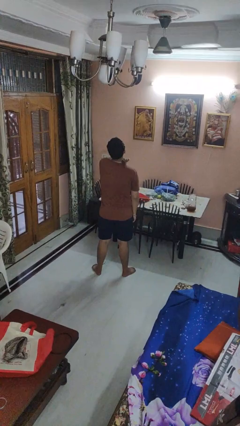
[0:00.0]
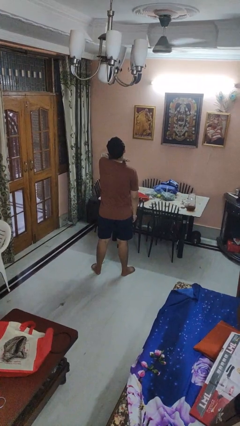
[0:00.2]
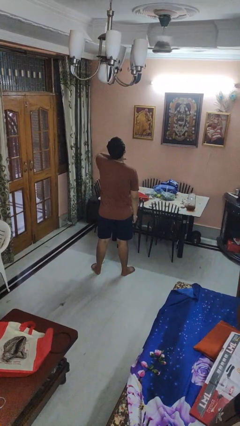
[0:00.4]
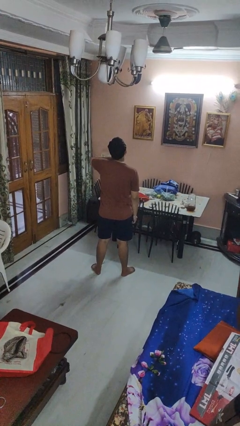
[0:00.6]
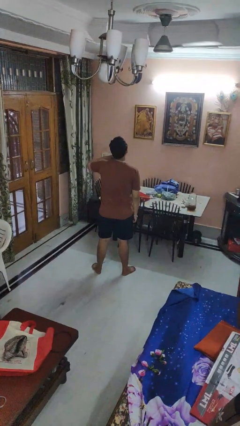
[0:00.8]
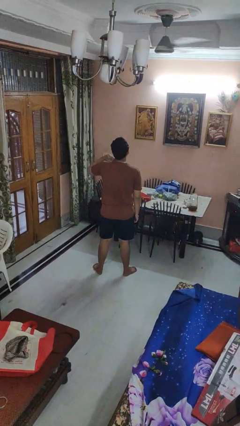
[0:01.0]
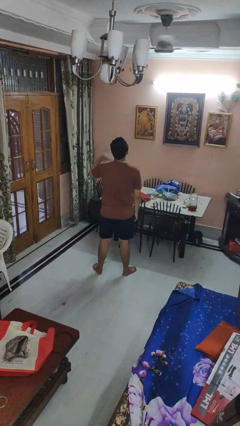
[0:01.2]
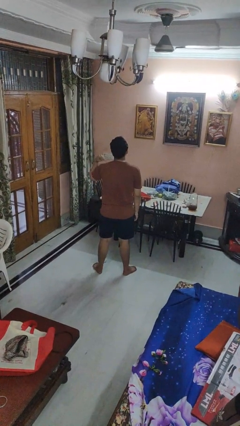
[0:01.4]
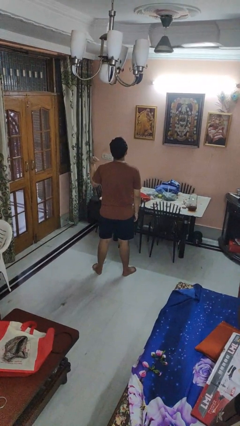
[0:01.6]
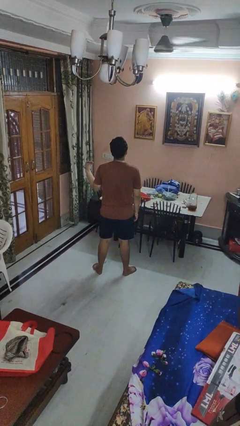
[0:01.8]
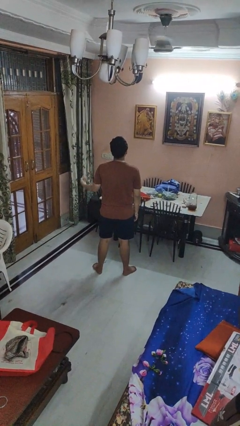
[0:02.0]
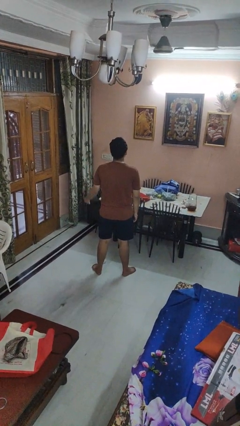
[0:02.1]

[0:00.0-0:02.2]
person gestures cut

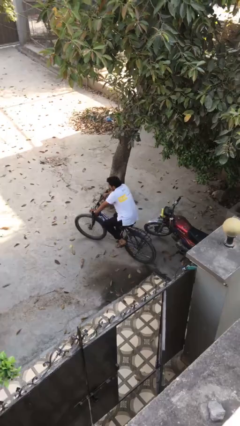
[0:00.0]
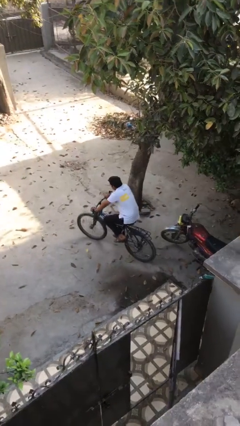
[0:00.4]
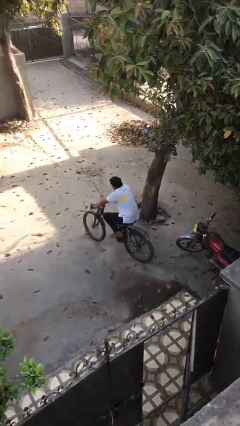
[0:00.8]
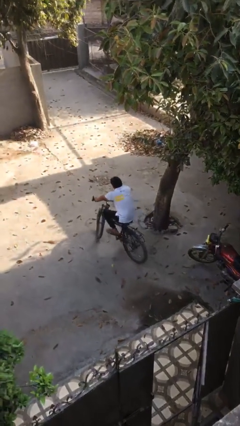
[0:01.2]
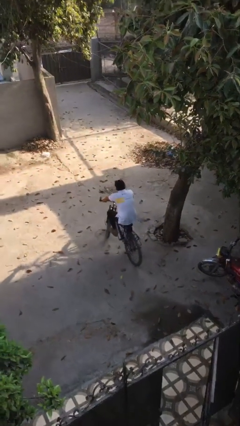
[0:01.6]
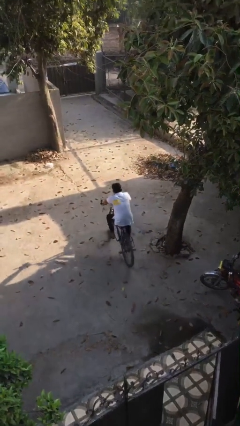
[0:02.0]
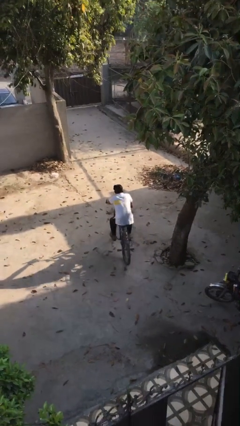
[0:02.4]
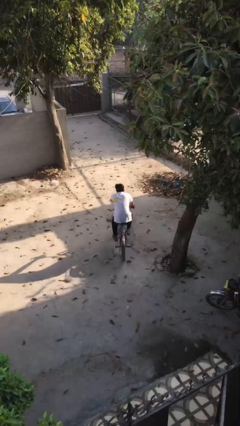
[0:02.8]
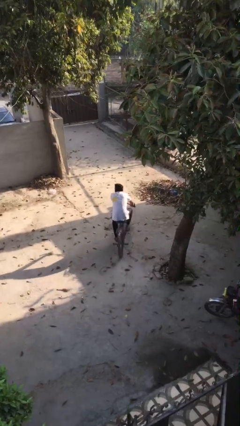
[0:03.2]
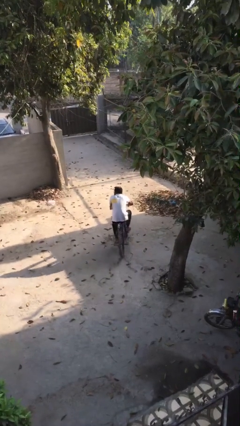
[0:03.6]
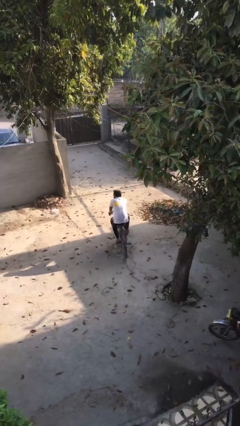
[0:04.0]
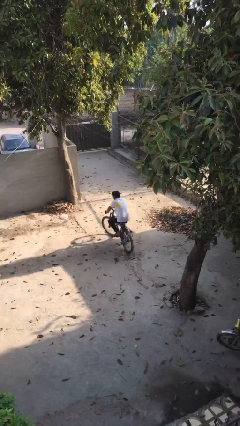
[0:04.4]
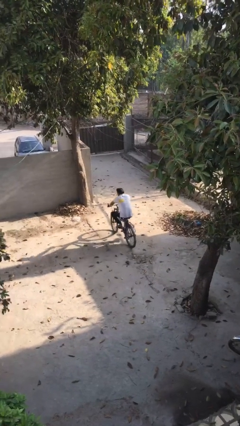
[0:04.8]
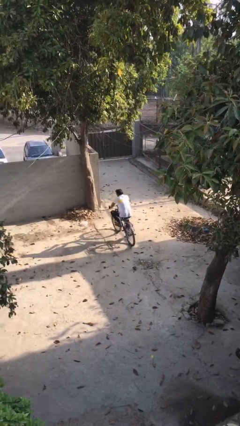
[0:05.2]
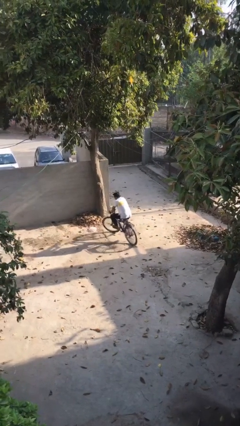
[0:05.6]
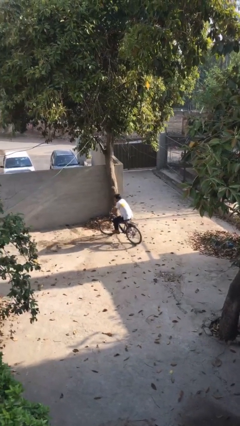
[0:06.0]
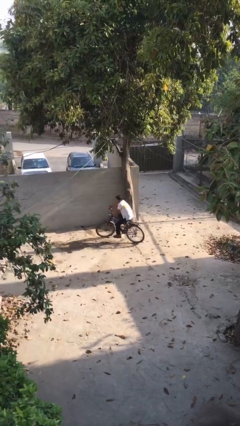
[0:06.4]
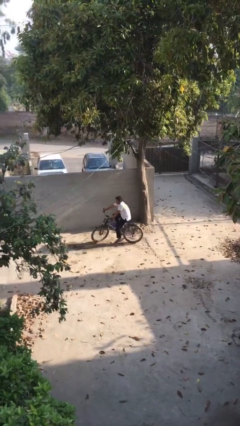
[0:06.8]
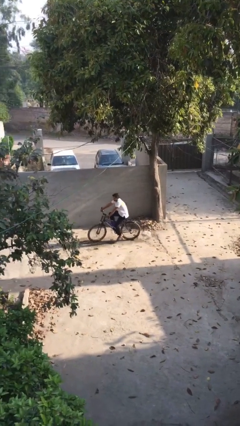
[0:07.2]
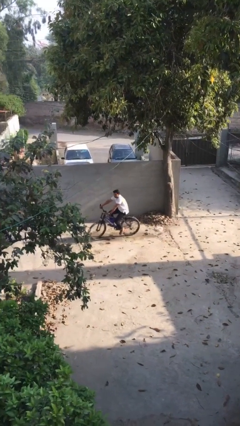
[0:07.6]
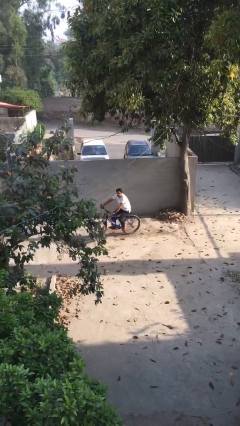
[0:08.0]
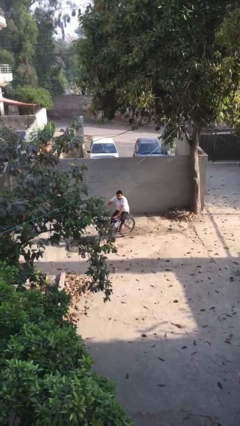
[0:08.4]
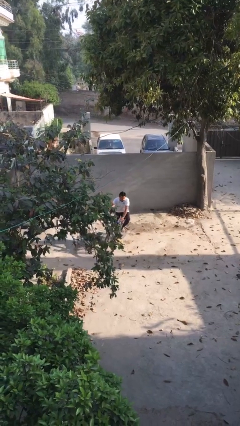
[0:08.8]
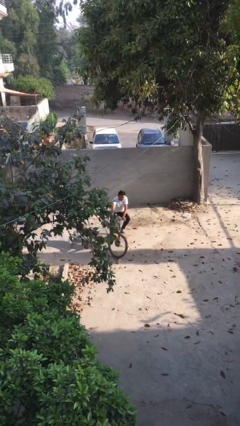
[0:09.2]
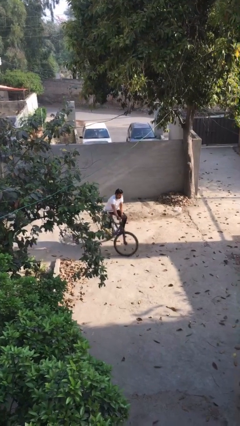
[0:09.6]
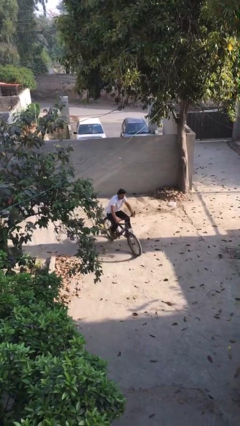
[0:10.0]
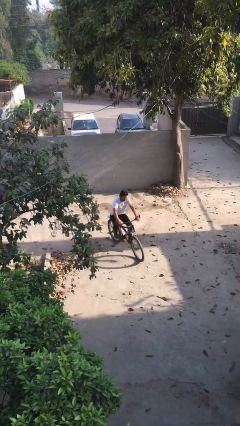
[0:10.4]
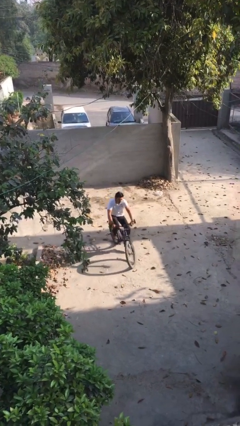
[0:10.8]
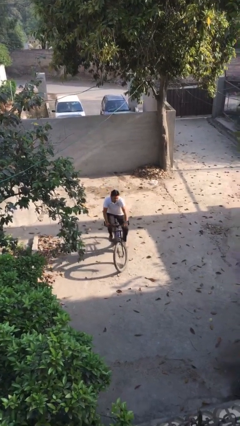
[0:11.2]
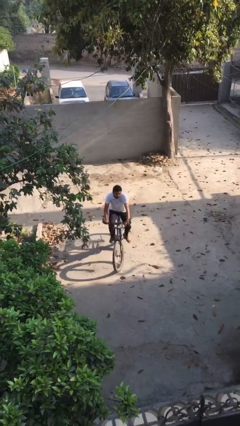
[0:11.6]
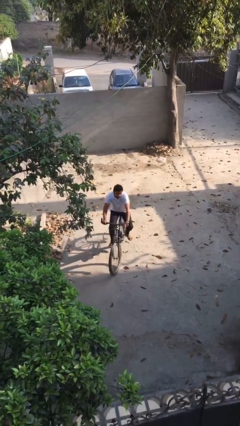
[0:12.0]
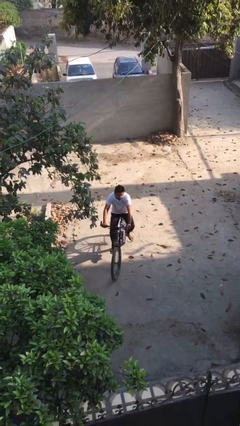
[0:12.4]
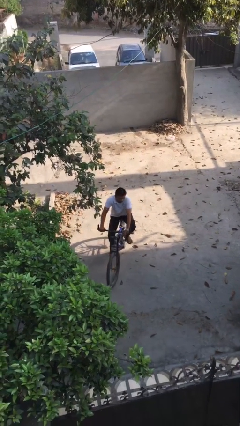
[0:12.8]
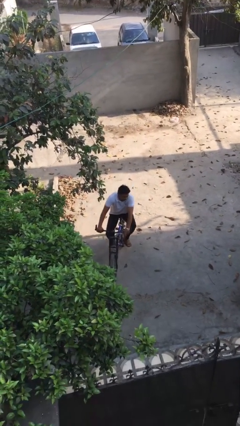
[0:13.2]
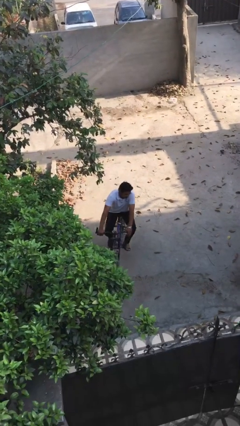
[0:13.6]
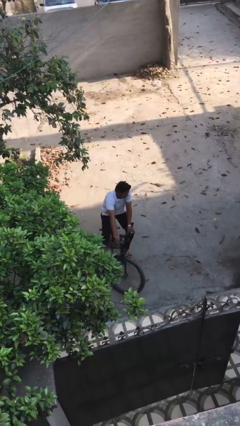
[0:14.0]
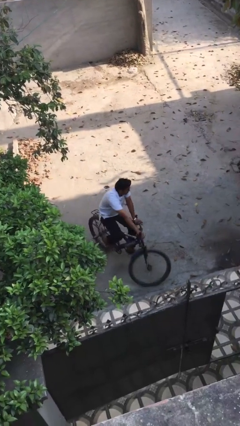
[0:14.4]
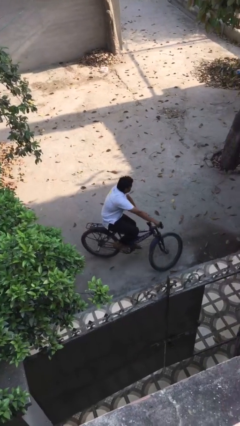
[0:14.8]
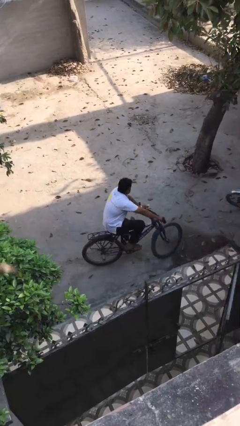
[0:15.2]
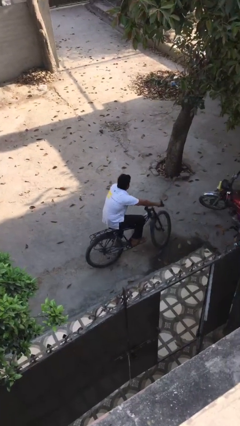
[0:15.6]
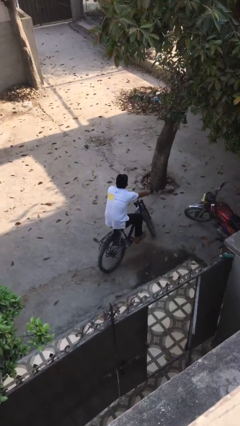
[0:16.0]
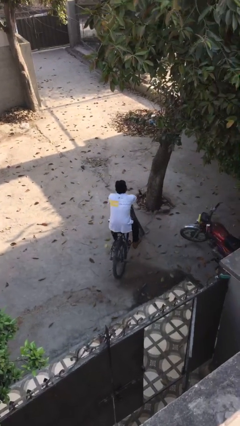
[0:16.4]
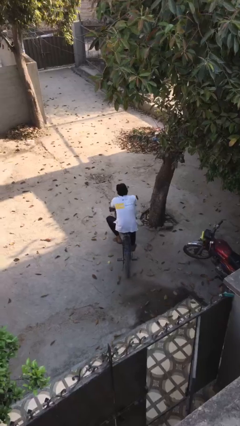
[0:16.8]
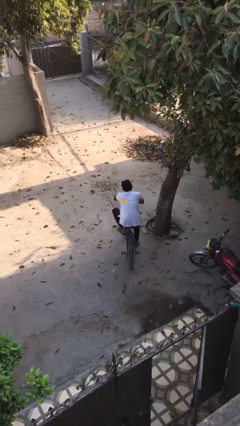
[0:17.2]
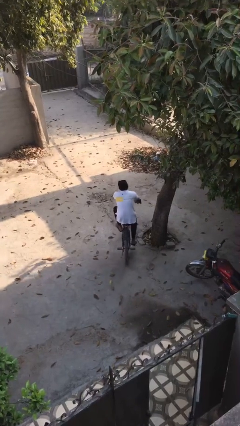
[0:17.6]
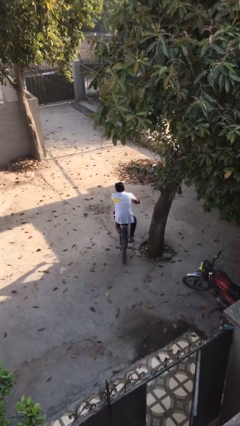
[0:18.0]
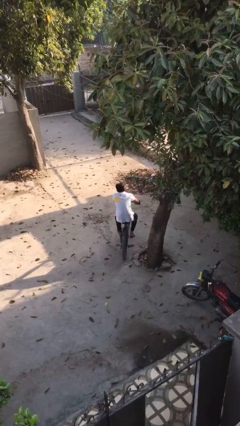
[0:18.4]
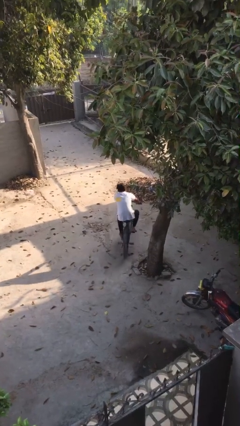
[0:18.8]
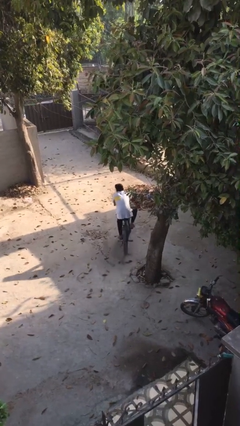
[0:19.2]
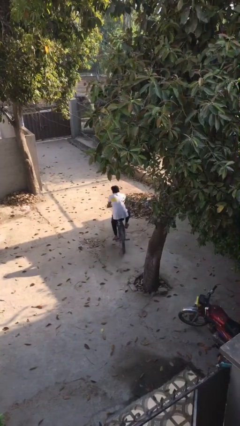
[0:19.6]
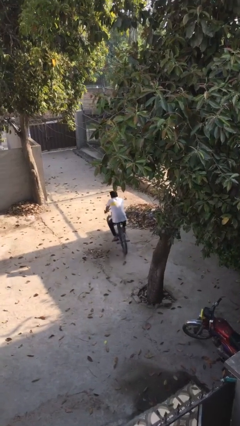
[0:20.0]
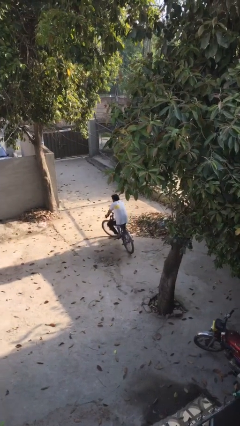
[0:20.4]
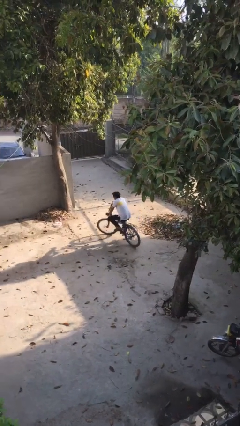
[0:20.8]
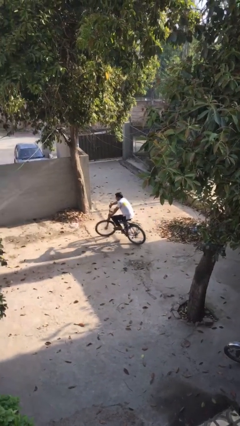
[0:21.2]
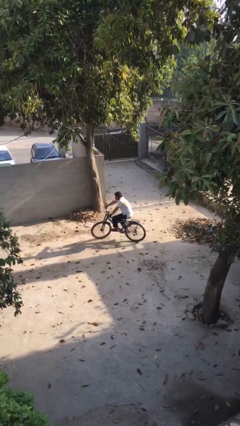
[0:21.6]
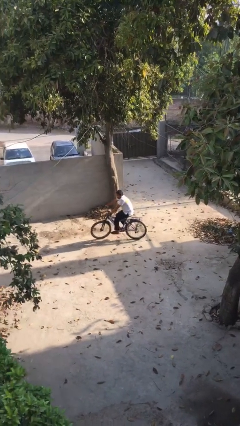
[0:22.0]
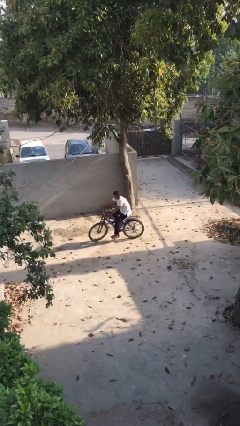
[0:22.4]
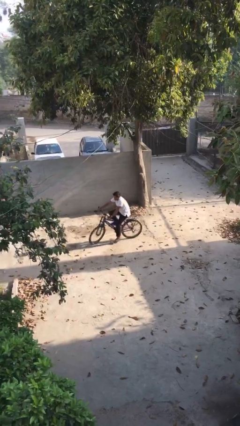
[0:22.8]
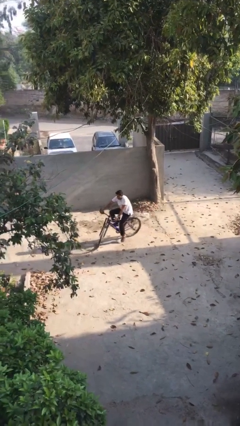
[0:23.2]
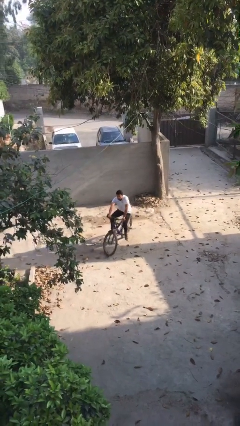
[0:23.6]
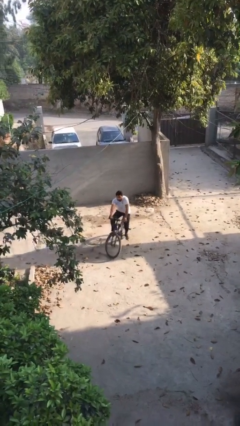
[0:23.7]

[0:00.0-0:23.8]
person rides bicycle

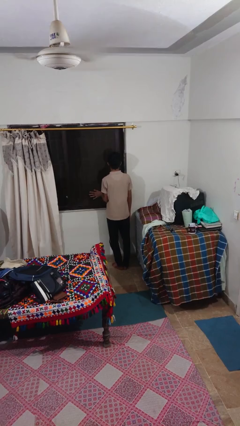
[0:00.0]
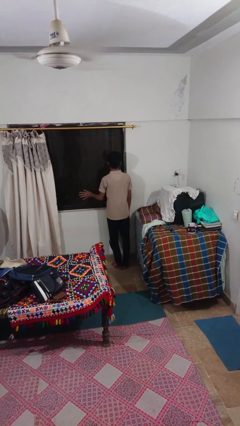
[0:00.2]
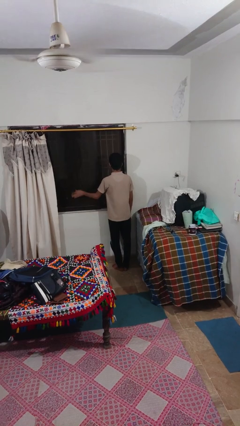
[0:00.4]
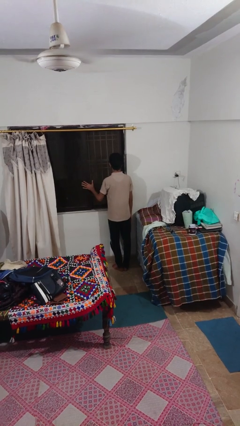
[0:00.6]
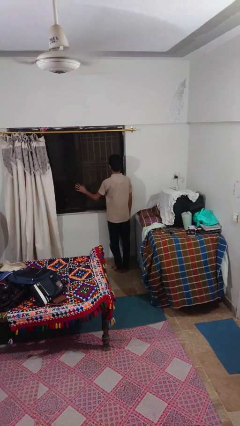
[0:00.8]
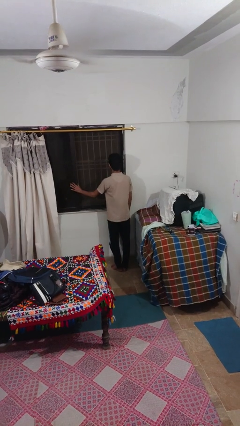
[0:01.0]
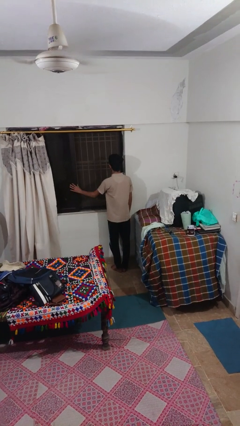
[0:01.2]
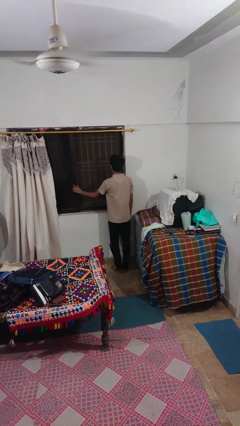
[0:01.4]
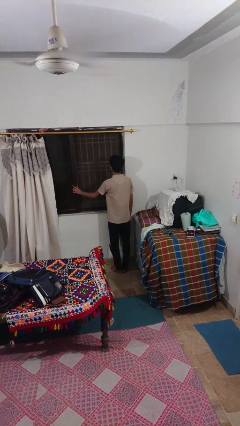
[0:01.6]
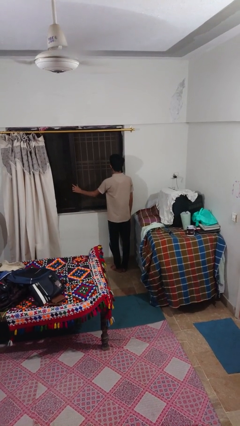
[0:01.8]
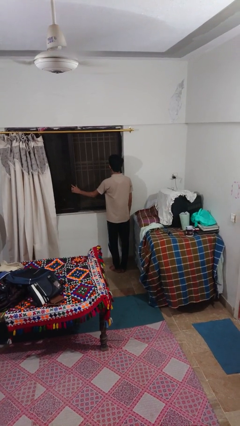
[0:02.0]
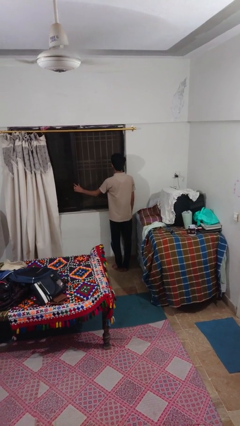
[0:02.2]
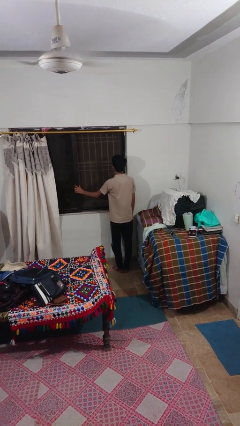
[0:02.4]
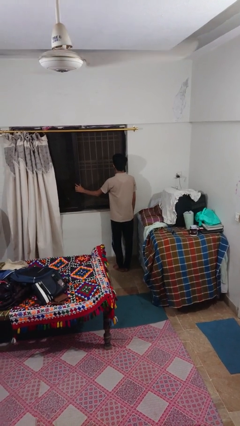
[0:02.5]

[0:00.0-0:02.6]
person opens sliding door

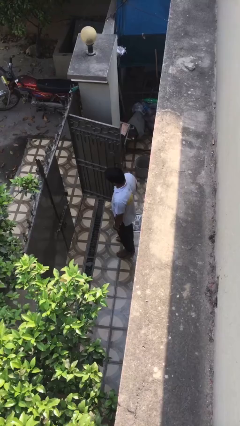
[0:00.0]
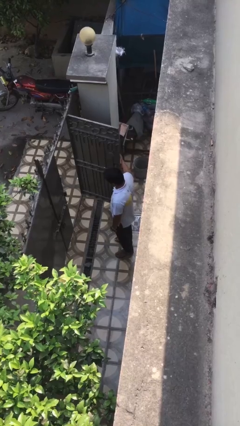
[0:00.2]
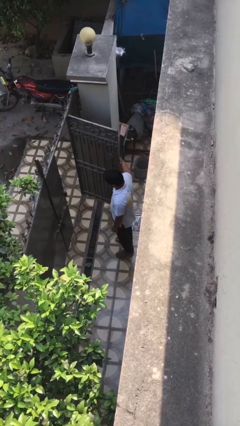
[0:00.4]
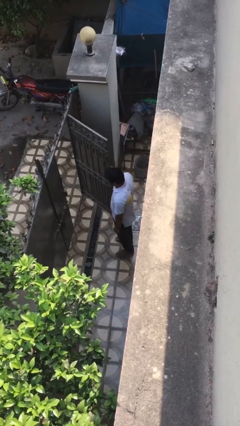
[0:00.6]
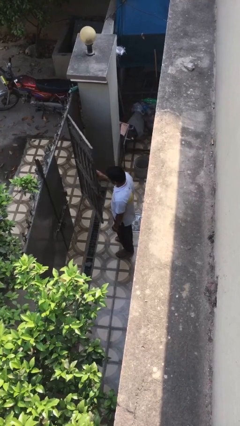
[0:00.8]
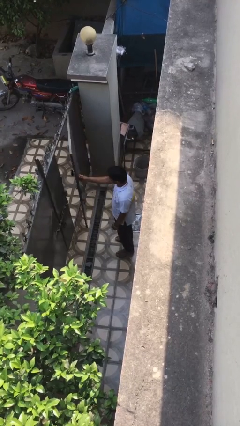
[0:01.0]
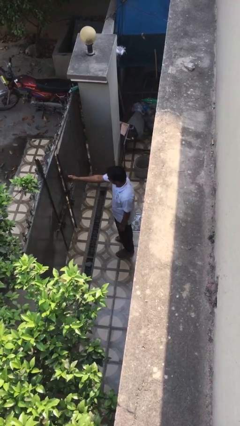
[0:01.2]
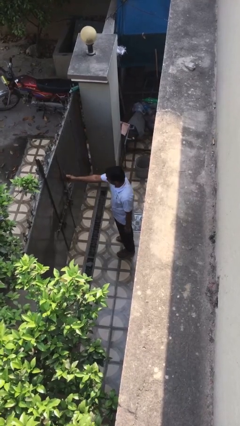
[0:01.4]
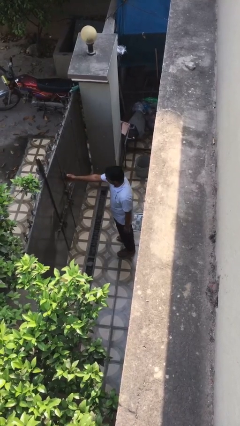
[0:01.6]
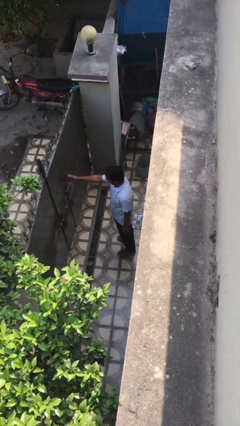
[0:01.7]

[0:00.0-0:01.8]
person closes facility door
